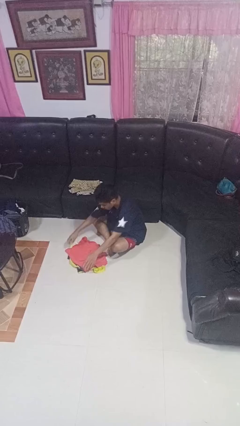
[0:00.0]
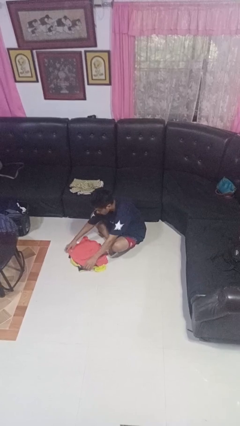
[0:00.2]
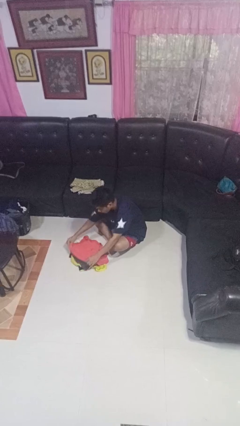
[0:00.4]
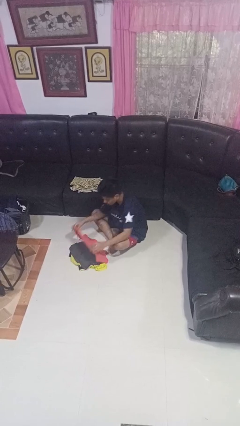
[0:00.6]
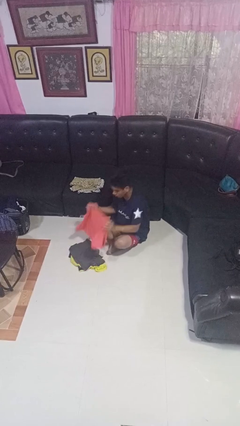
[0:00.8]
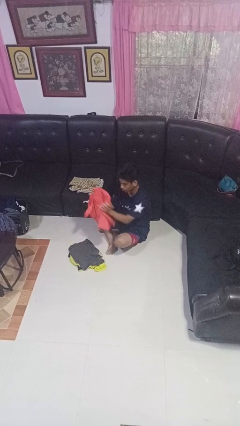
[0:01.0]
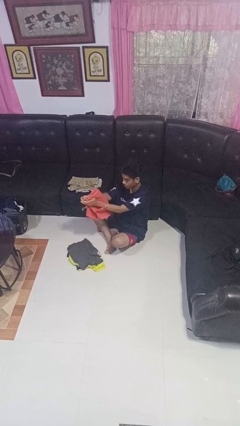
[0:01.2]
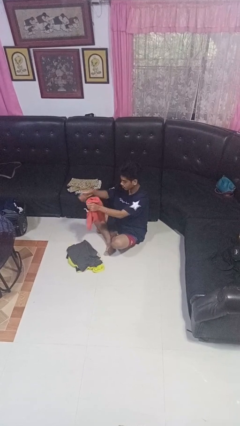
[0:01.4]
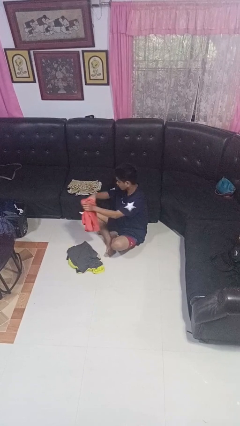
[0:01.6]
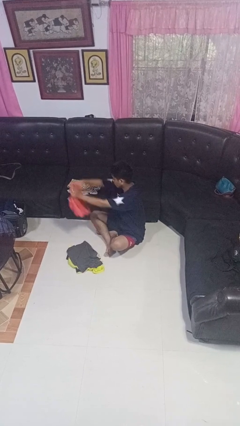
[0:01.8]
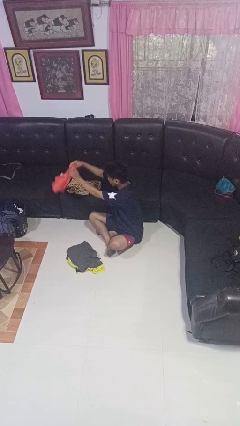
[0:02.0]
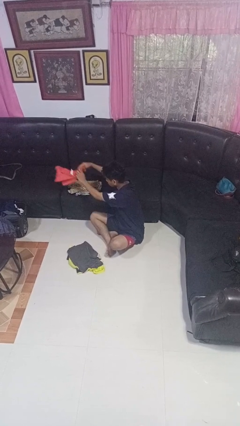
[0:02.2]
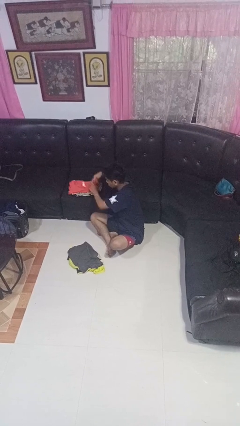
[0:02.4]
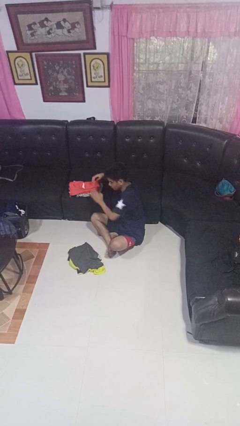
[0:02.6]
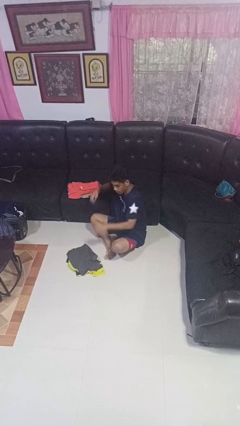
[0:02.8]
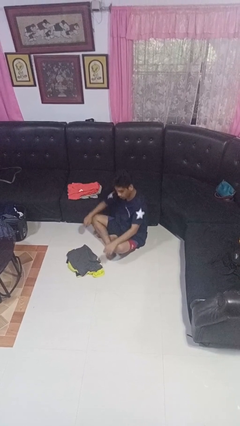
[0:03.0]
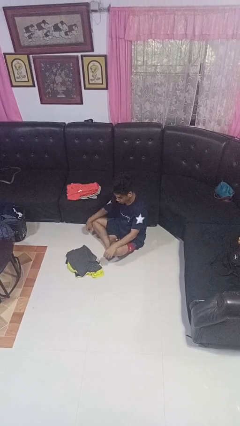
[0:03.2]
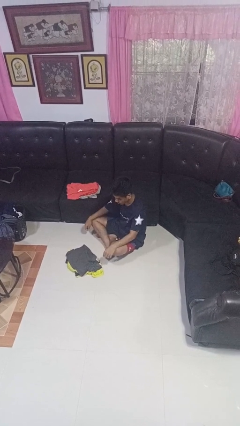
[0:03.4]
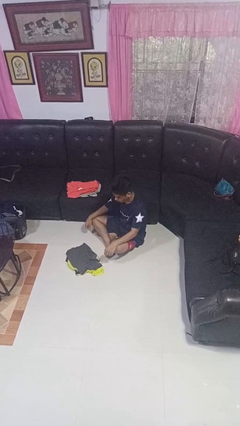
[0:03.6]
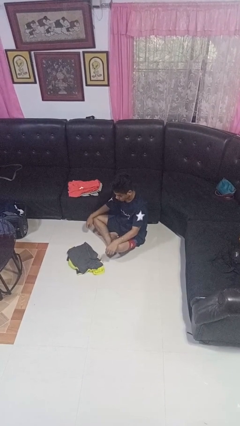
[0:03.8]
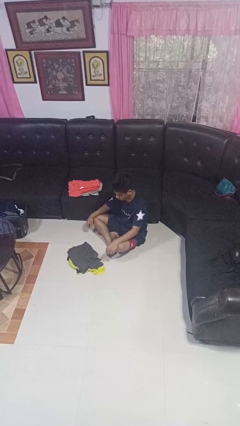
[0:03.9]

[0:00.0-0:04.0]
person folds shirt

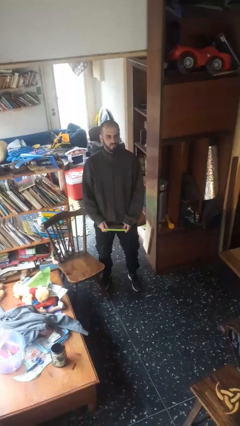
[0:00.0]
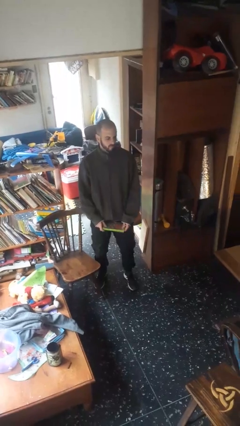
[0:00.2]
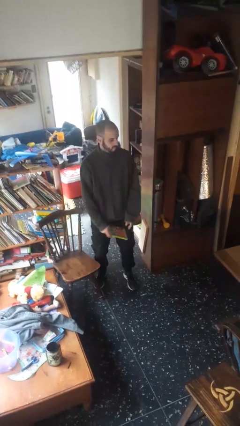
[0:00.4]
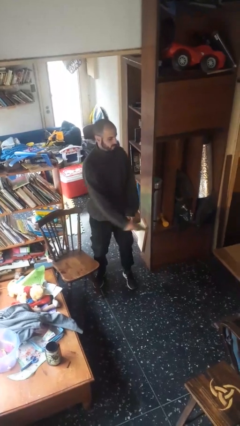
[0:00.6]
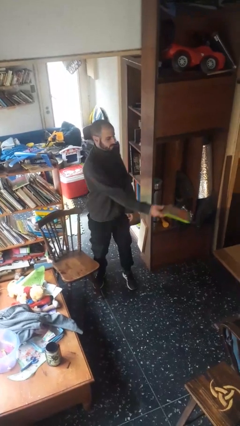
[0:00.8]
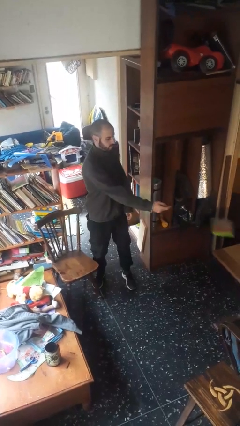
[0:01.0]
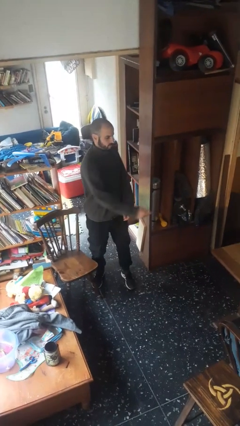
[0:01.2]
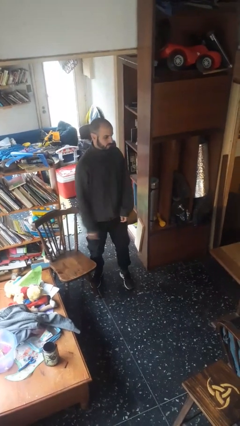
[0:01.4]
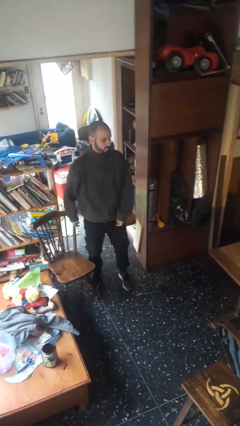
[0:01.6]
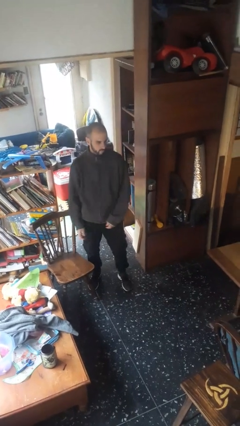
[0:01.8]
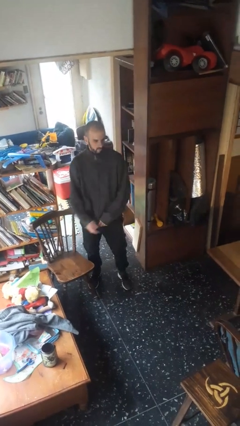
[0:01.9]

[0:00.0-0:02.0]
person throws object on table

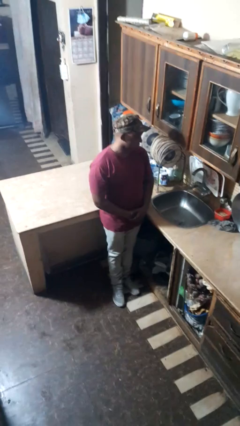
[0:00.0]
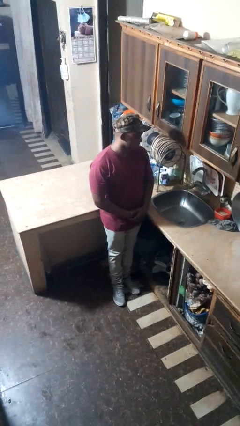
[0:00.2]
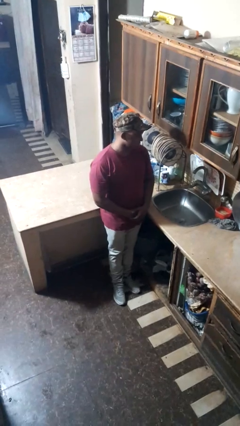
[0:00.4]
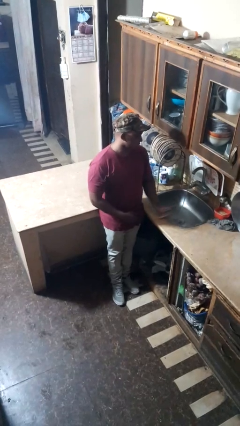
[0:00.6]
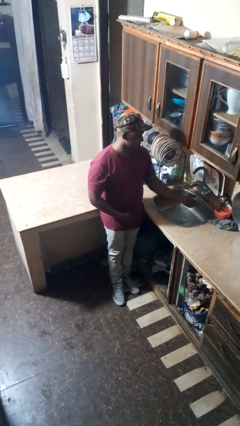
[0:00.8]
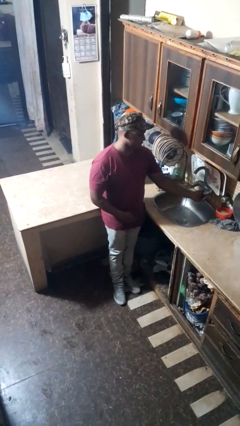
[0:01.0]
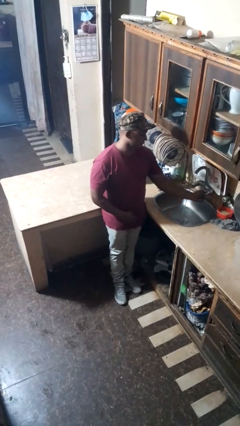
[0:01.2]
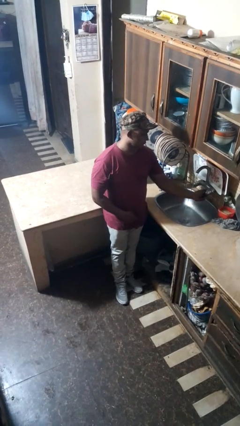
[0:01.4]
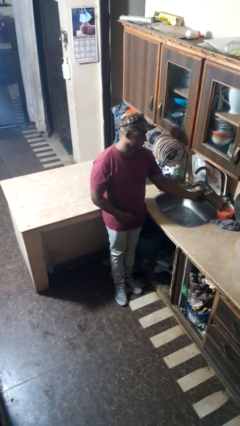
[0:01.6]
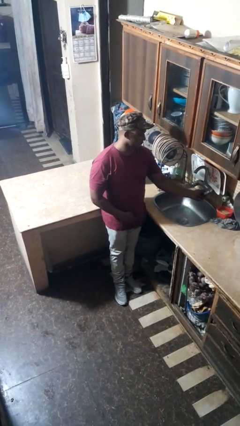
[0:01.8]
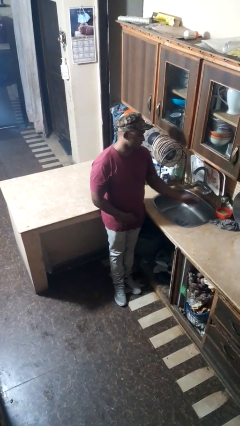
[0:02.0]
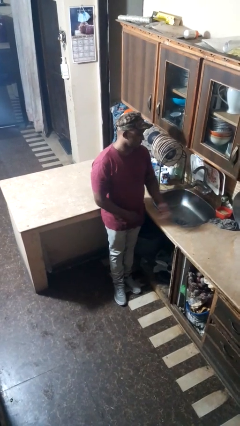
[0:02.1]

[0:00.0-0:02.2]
person turns off faucet

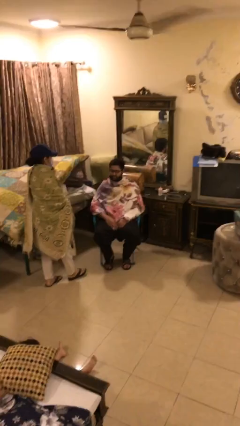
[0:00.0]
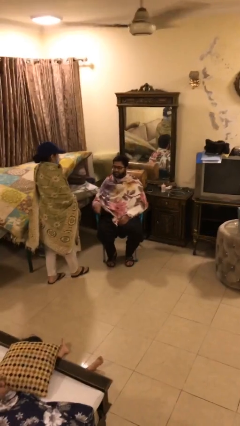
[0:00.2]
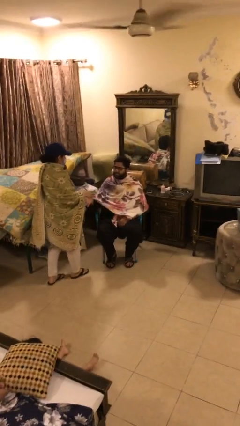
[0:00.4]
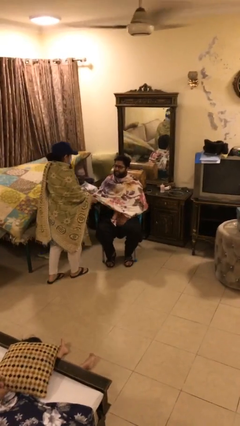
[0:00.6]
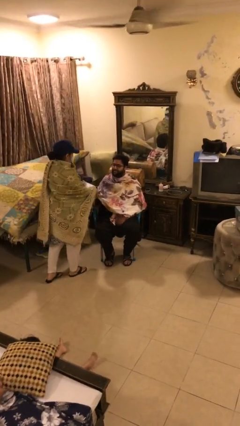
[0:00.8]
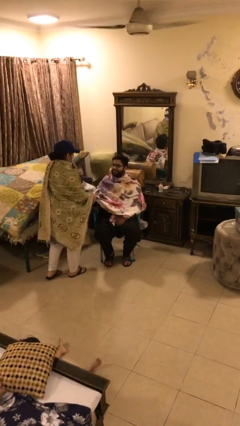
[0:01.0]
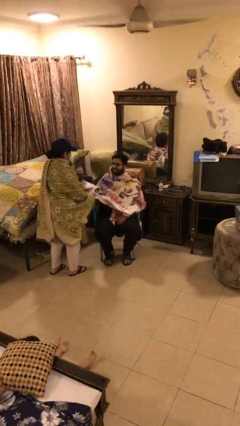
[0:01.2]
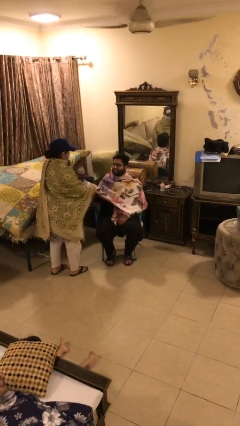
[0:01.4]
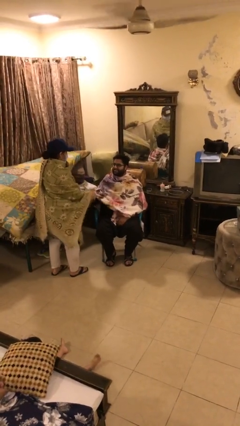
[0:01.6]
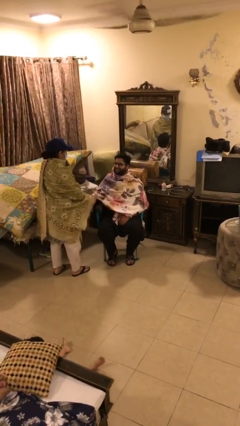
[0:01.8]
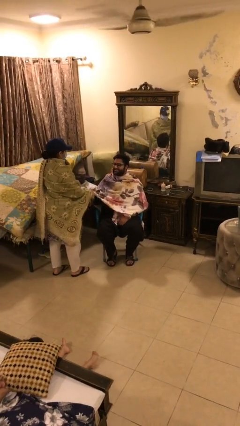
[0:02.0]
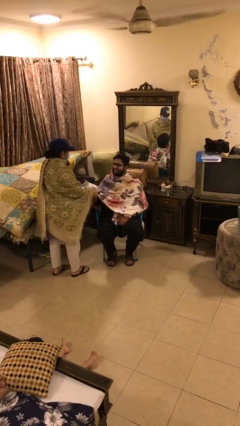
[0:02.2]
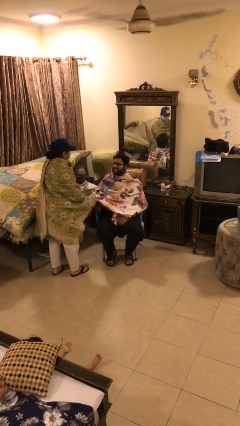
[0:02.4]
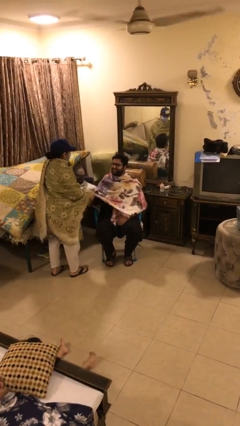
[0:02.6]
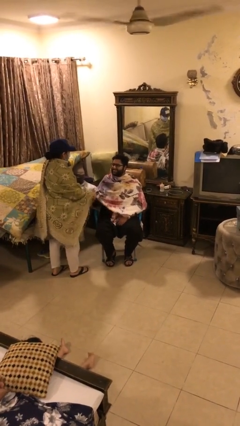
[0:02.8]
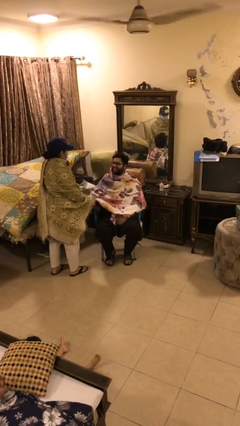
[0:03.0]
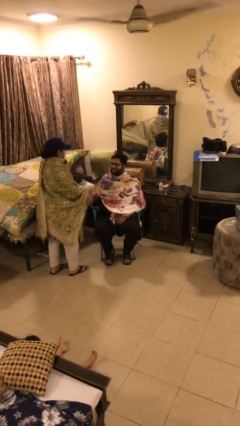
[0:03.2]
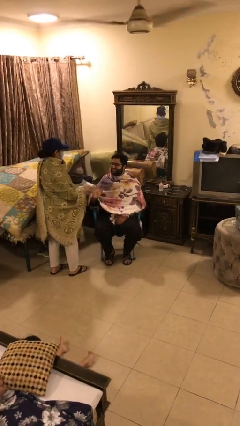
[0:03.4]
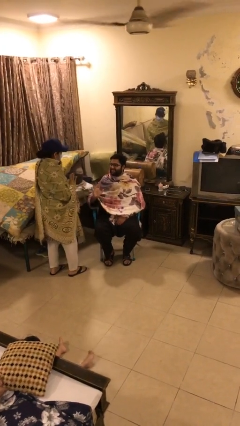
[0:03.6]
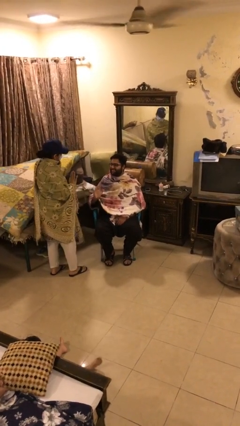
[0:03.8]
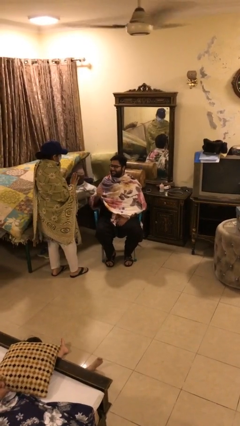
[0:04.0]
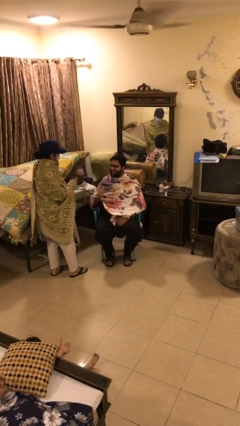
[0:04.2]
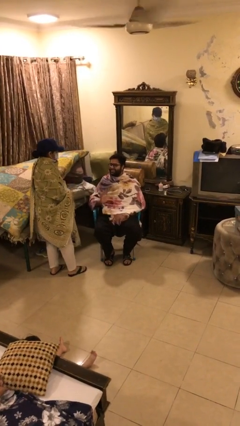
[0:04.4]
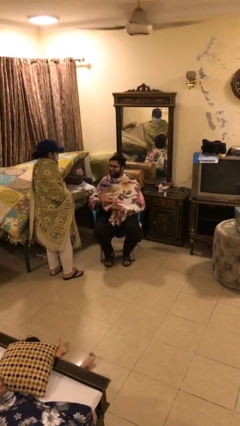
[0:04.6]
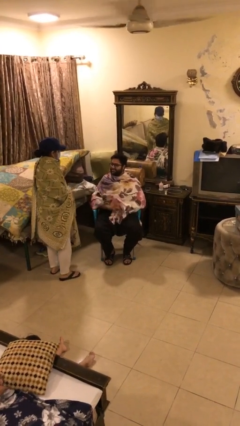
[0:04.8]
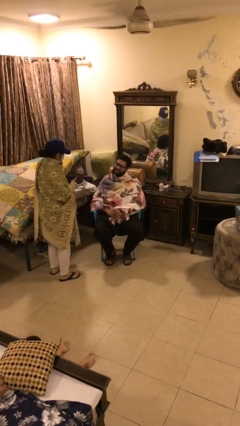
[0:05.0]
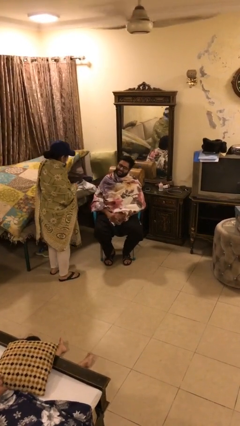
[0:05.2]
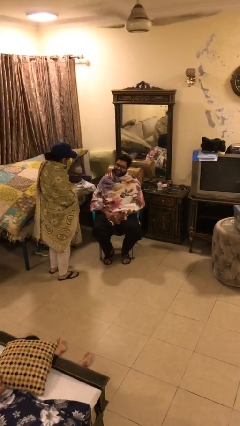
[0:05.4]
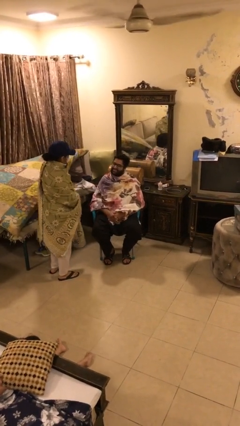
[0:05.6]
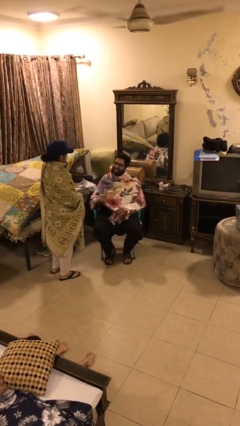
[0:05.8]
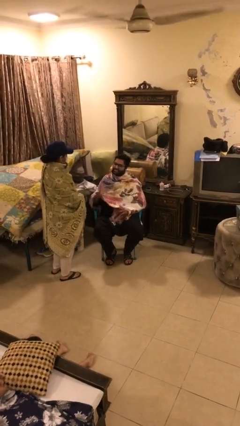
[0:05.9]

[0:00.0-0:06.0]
person shakes hand

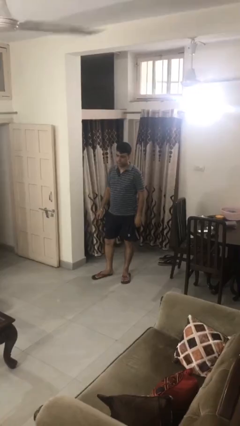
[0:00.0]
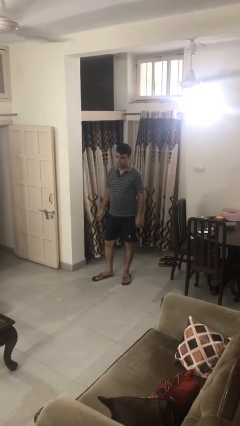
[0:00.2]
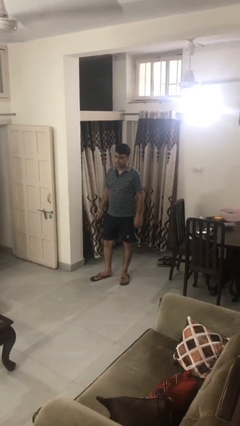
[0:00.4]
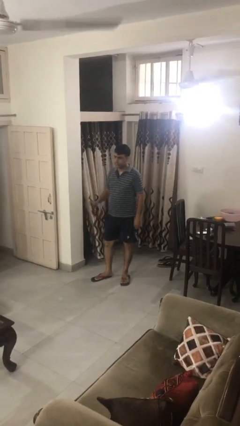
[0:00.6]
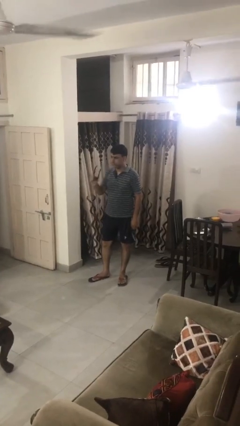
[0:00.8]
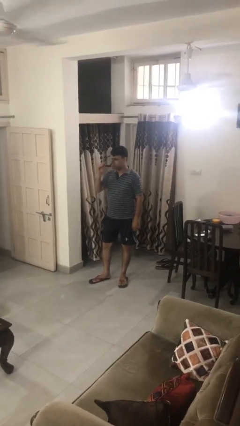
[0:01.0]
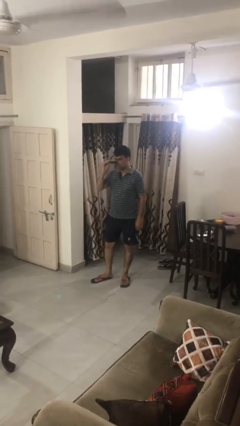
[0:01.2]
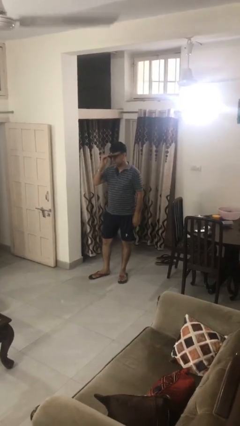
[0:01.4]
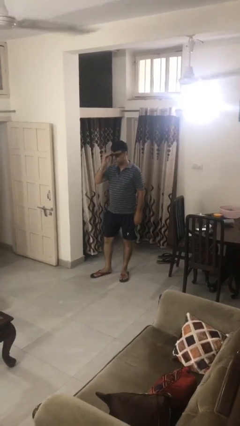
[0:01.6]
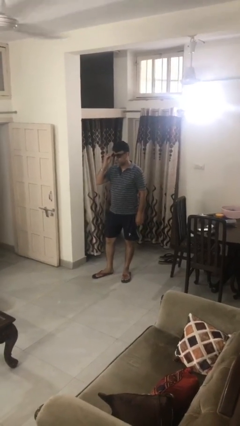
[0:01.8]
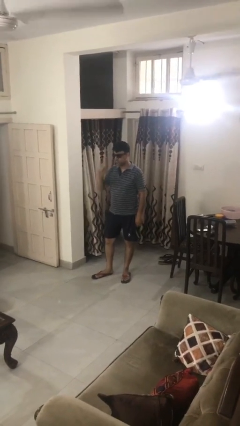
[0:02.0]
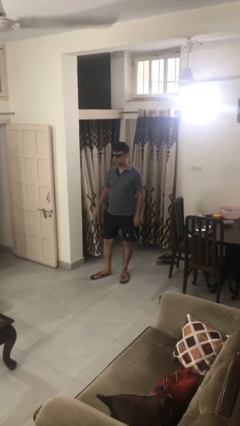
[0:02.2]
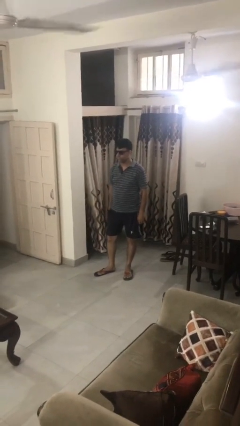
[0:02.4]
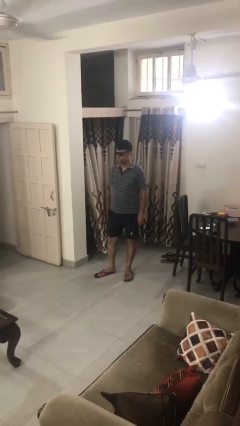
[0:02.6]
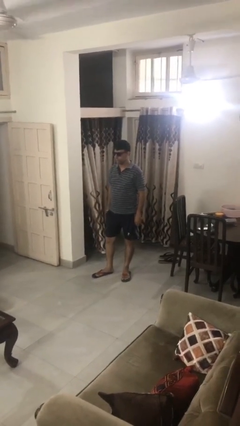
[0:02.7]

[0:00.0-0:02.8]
person puts on sunglasses

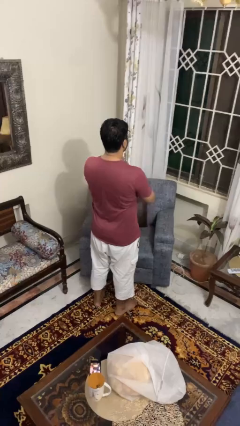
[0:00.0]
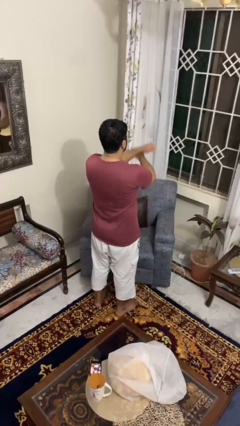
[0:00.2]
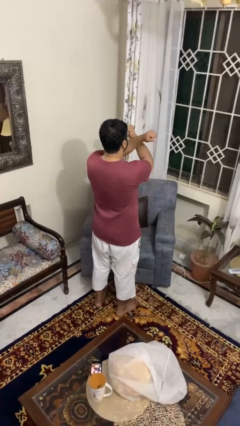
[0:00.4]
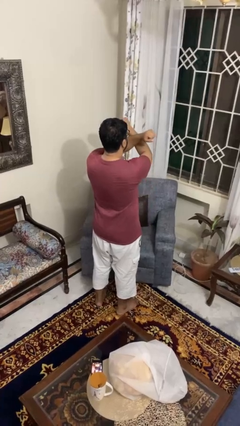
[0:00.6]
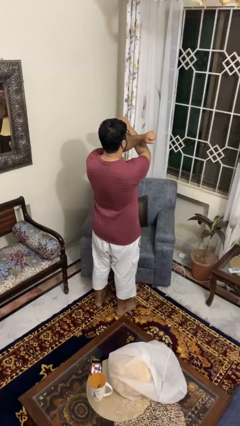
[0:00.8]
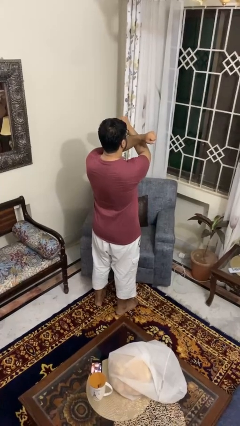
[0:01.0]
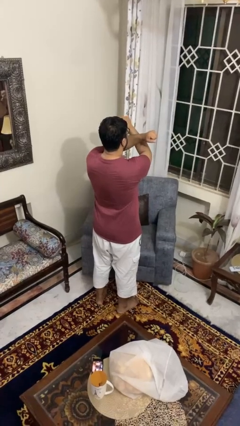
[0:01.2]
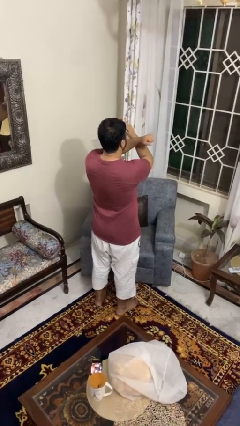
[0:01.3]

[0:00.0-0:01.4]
person gestures arms x
